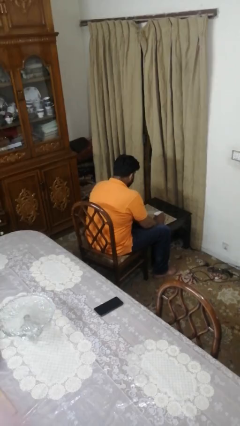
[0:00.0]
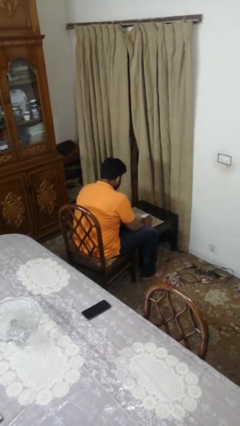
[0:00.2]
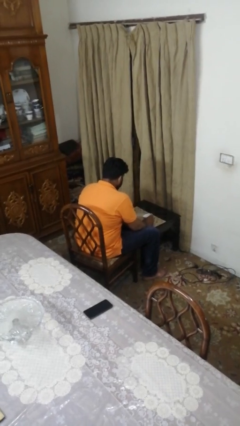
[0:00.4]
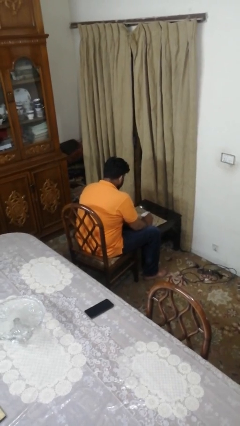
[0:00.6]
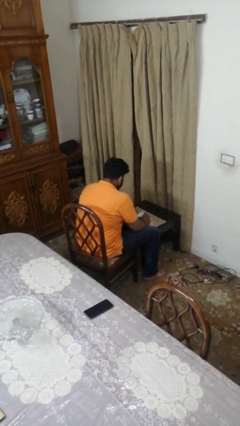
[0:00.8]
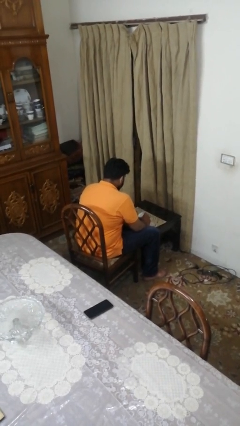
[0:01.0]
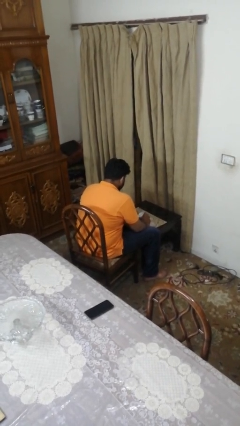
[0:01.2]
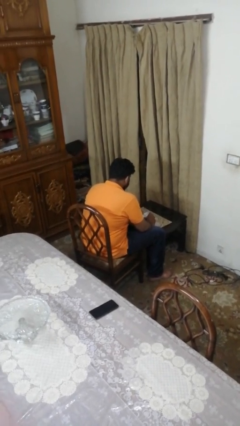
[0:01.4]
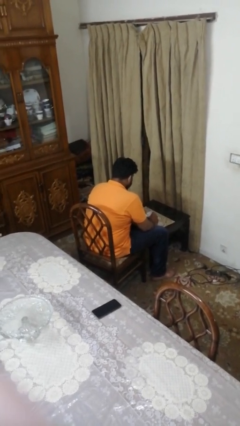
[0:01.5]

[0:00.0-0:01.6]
person stirs mug

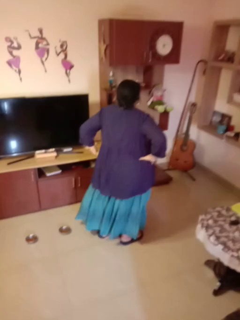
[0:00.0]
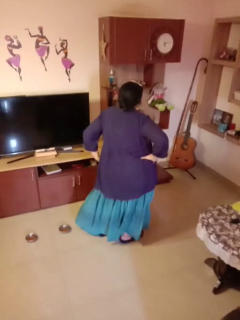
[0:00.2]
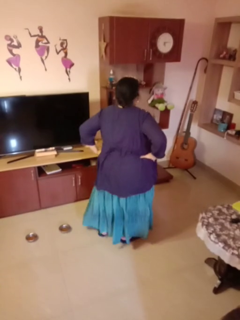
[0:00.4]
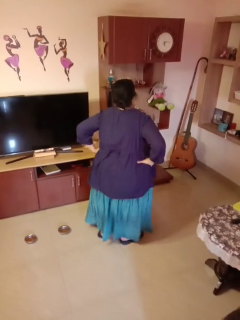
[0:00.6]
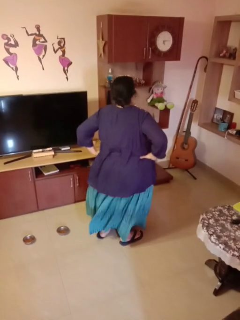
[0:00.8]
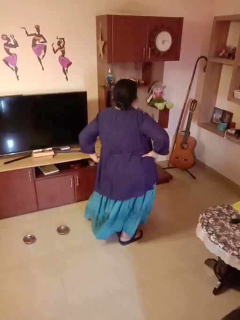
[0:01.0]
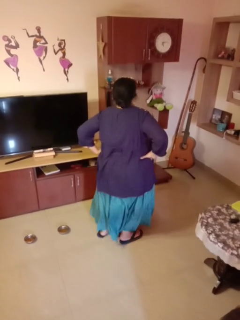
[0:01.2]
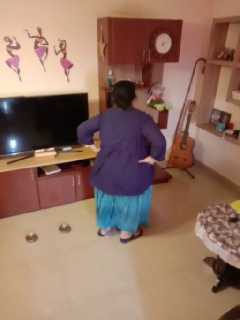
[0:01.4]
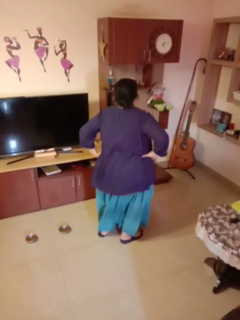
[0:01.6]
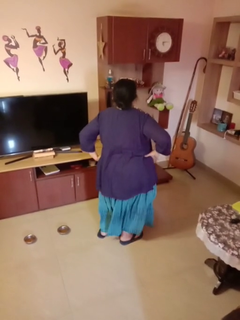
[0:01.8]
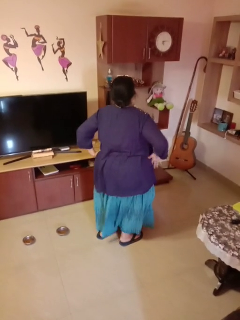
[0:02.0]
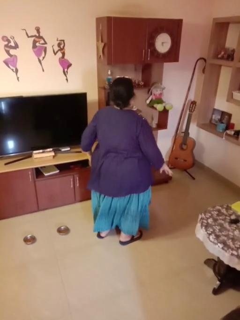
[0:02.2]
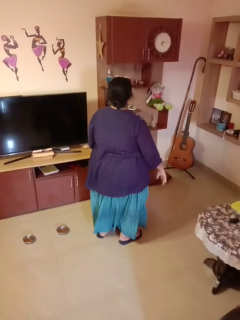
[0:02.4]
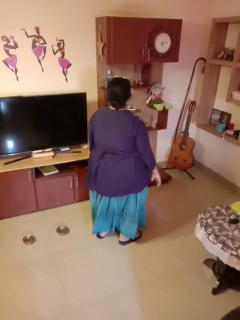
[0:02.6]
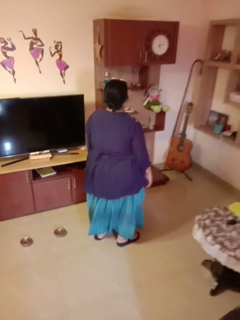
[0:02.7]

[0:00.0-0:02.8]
person wiggles hips

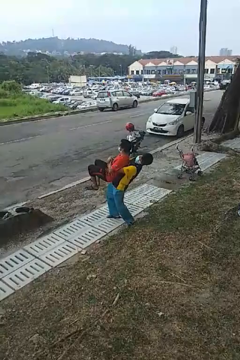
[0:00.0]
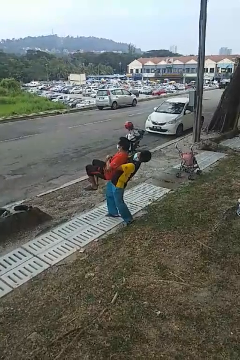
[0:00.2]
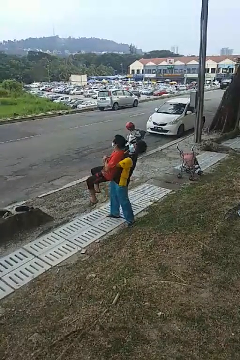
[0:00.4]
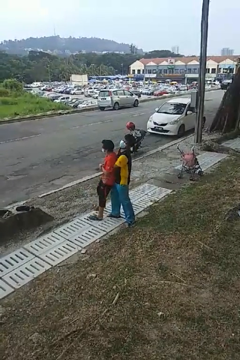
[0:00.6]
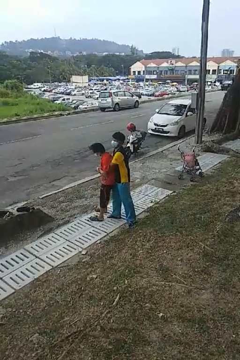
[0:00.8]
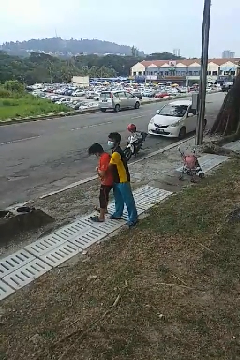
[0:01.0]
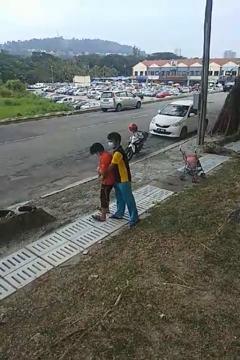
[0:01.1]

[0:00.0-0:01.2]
person puts down person

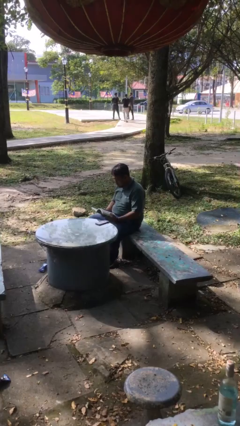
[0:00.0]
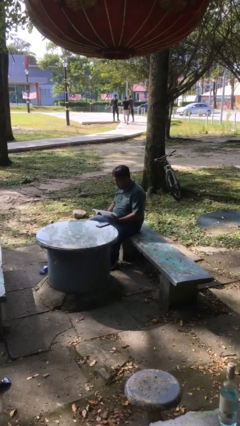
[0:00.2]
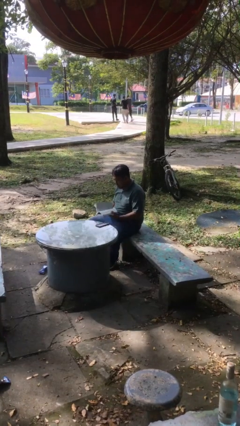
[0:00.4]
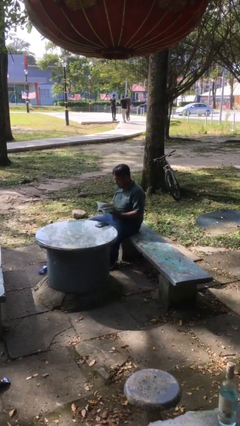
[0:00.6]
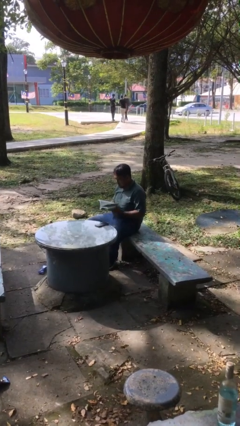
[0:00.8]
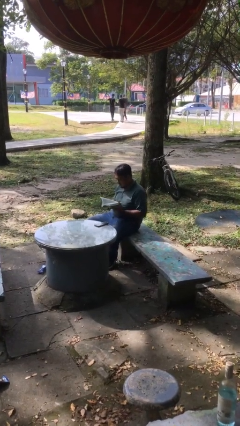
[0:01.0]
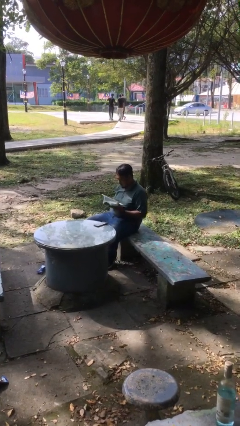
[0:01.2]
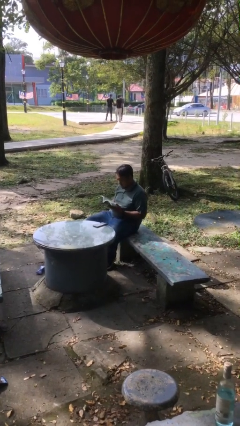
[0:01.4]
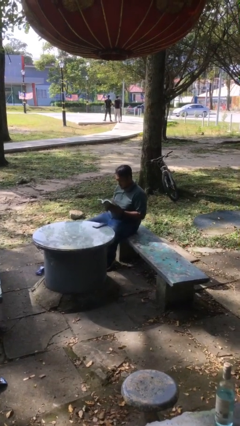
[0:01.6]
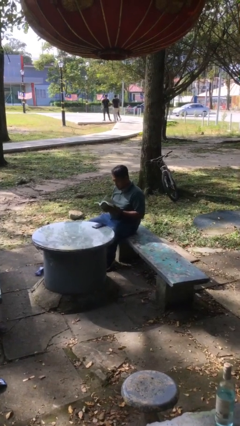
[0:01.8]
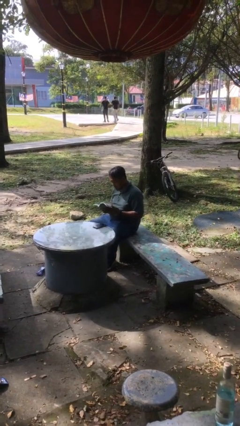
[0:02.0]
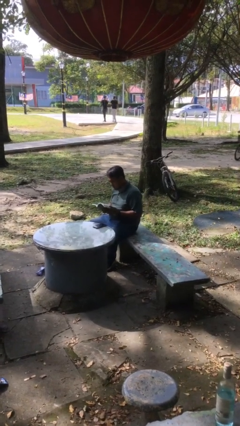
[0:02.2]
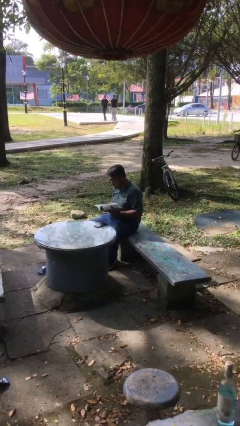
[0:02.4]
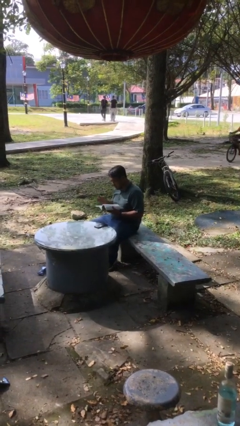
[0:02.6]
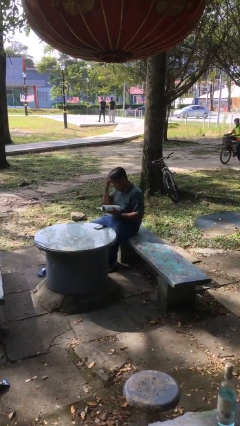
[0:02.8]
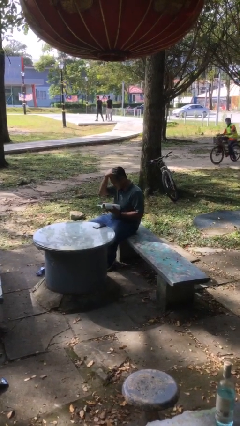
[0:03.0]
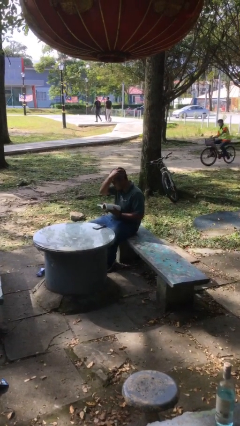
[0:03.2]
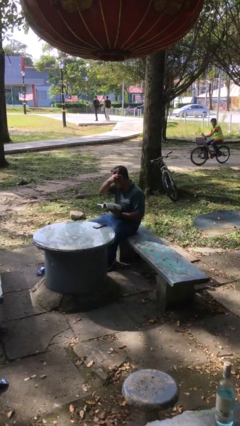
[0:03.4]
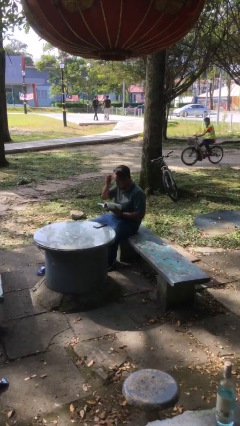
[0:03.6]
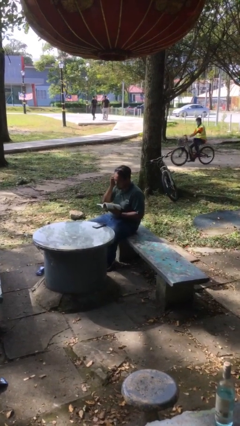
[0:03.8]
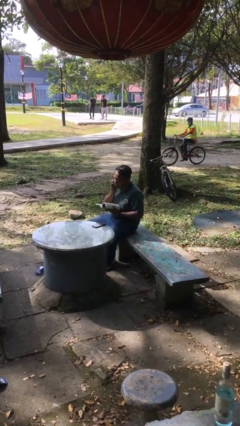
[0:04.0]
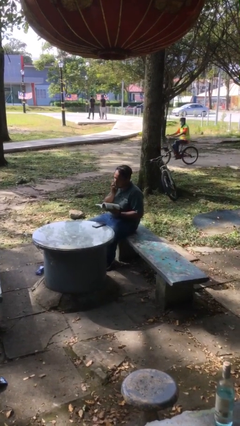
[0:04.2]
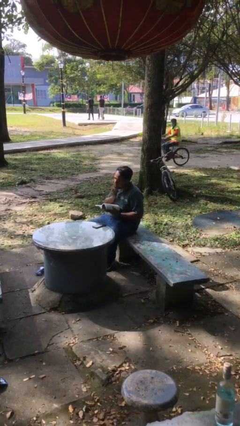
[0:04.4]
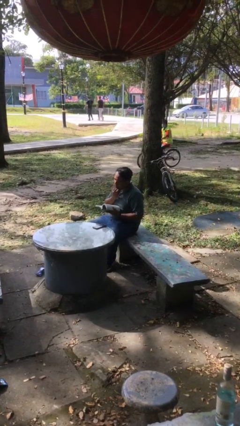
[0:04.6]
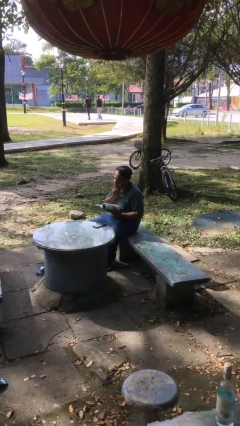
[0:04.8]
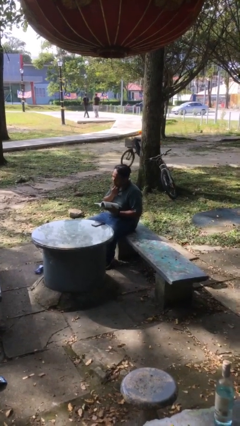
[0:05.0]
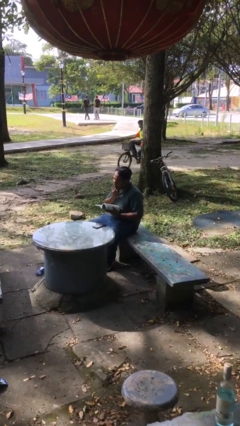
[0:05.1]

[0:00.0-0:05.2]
person reads document

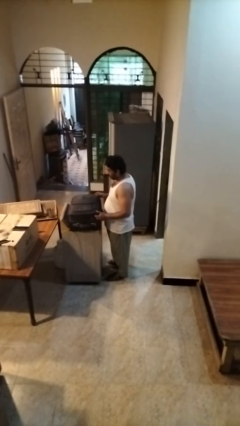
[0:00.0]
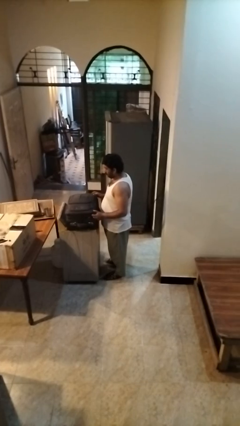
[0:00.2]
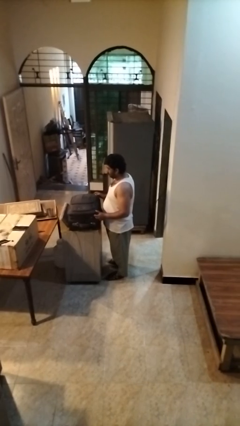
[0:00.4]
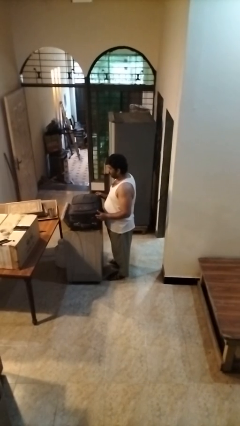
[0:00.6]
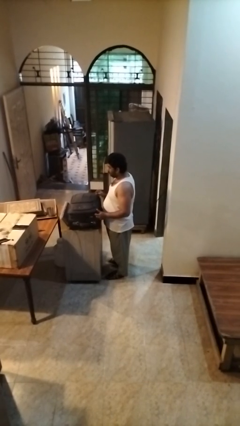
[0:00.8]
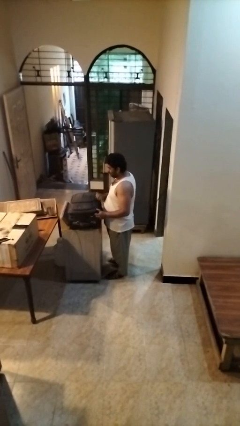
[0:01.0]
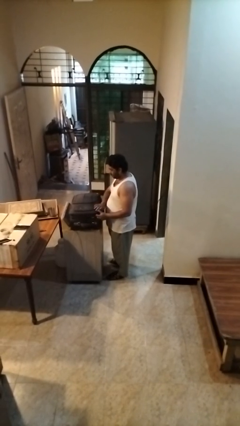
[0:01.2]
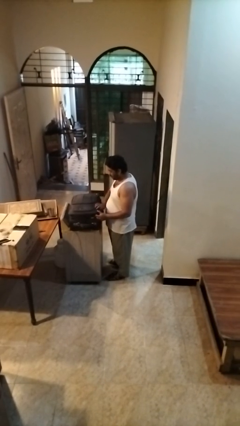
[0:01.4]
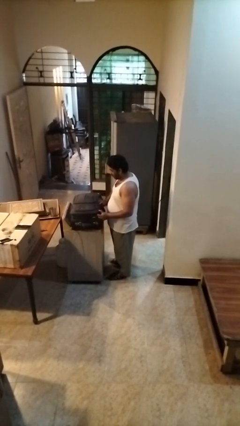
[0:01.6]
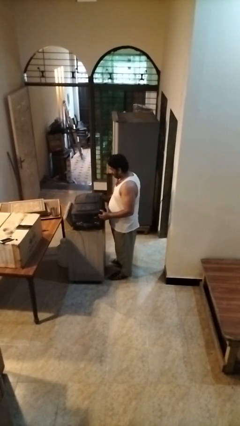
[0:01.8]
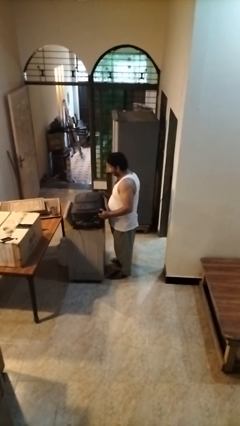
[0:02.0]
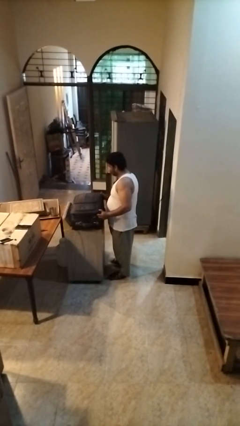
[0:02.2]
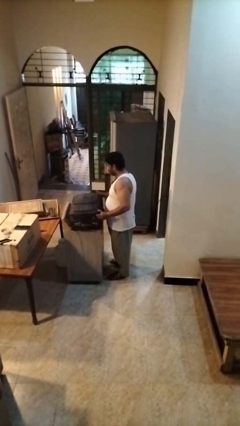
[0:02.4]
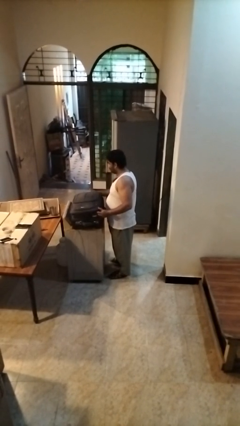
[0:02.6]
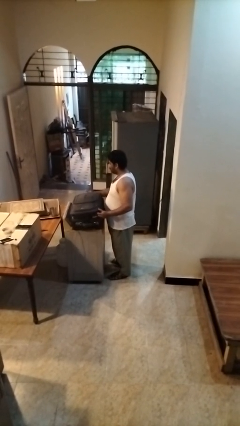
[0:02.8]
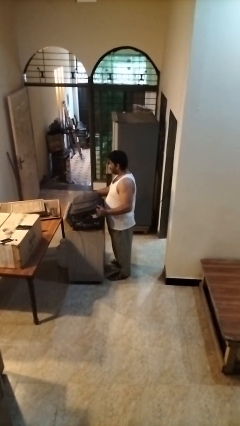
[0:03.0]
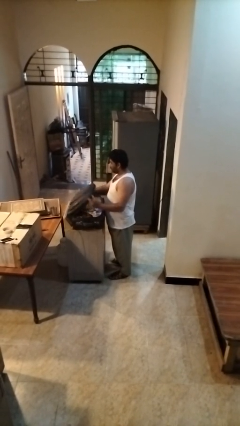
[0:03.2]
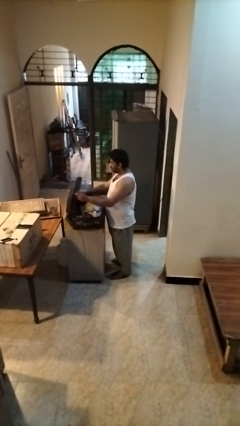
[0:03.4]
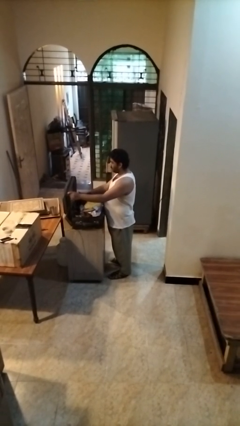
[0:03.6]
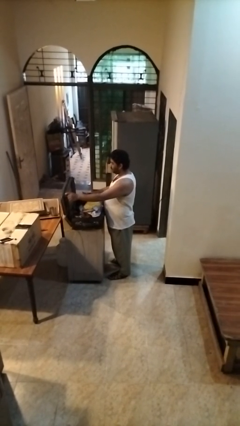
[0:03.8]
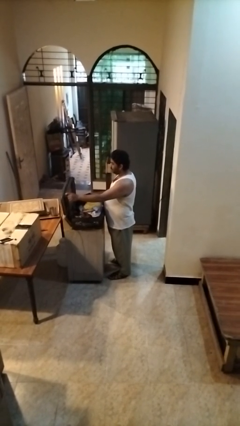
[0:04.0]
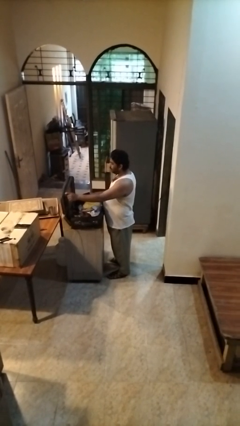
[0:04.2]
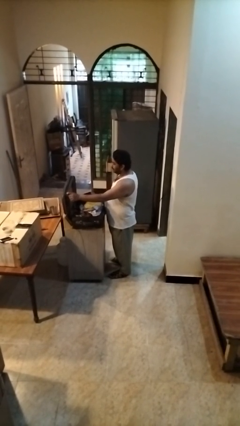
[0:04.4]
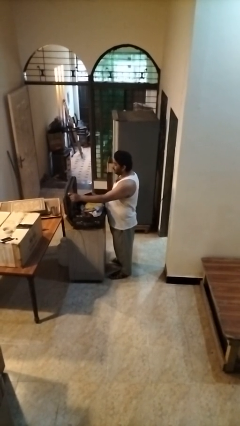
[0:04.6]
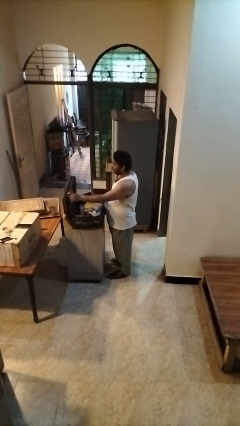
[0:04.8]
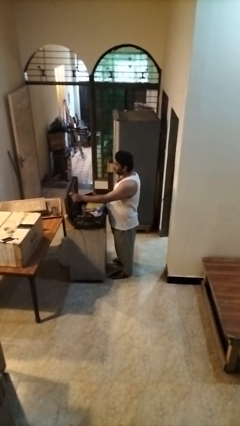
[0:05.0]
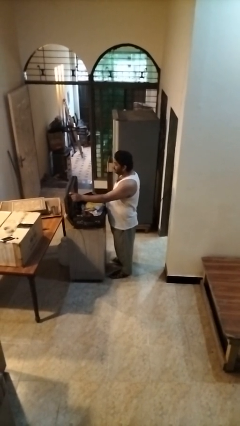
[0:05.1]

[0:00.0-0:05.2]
person opens suitcase

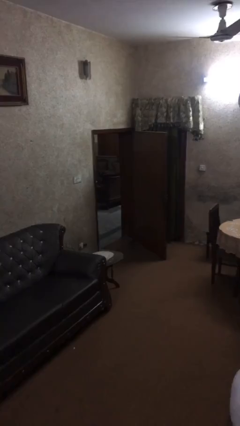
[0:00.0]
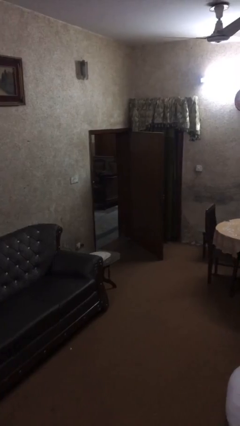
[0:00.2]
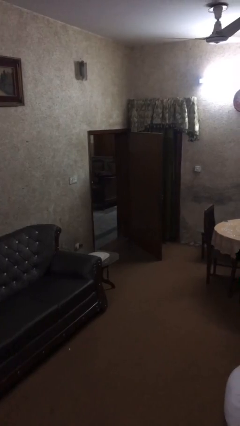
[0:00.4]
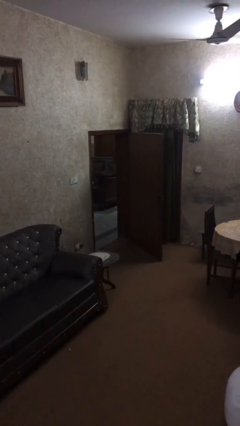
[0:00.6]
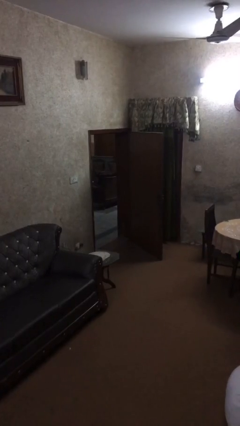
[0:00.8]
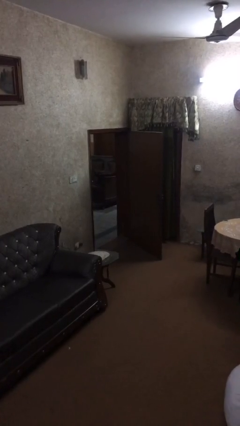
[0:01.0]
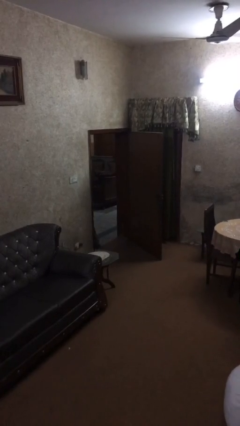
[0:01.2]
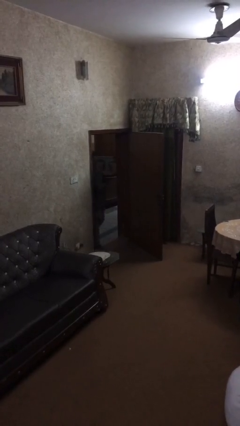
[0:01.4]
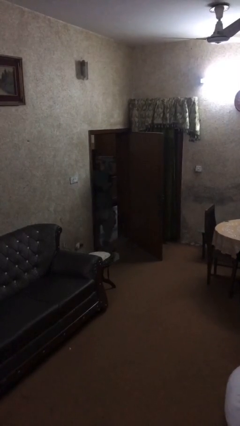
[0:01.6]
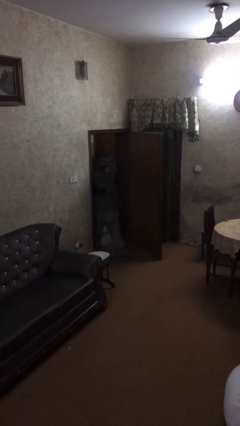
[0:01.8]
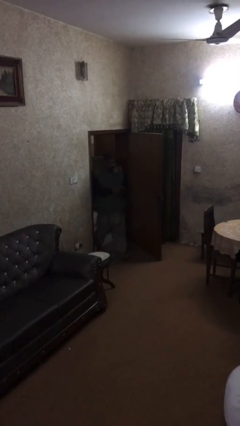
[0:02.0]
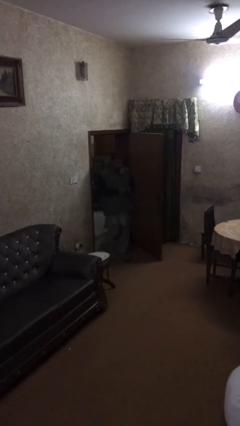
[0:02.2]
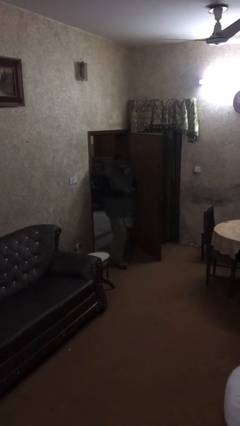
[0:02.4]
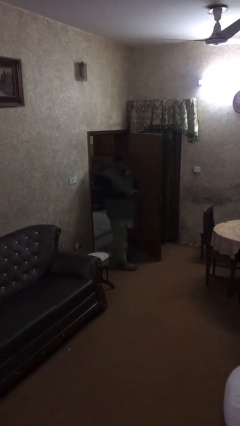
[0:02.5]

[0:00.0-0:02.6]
person enters scene through structure
